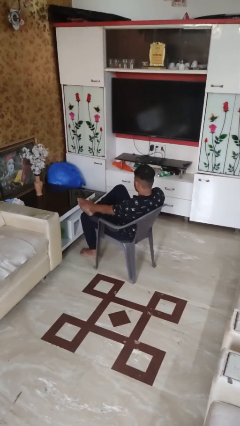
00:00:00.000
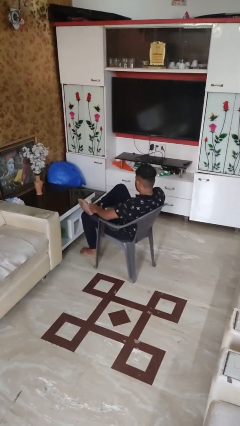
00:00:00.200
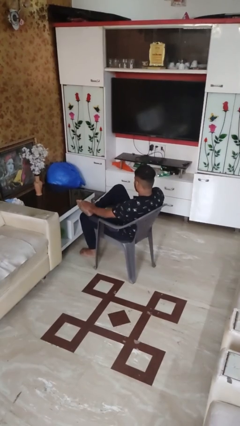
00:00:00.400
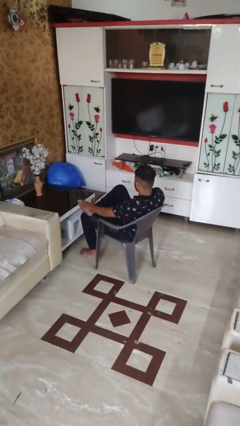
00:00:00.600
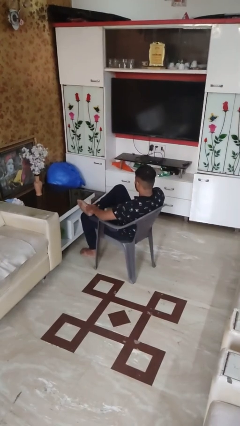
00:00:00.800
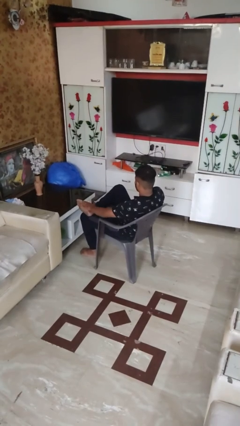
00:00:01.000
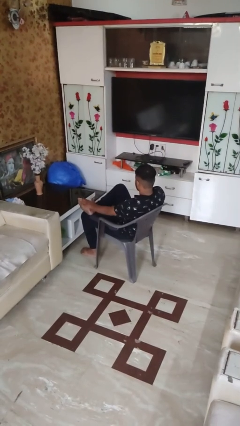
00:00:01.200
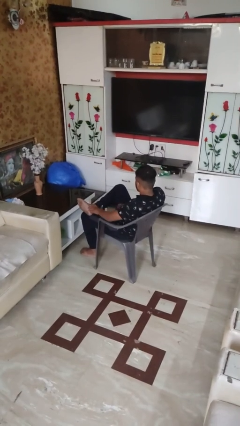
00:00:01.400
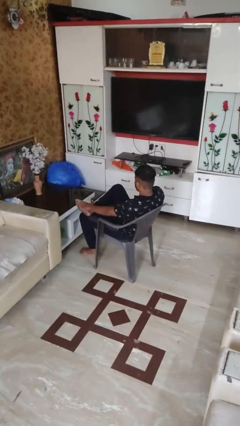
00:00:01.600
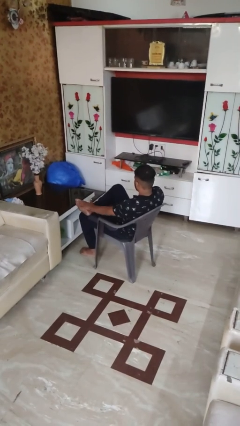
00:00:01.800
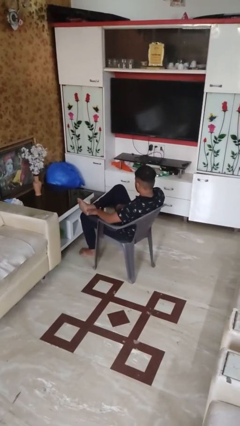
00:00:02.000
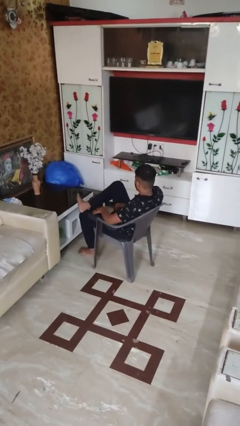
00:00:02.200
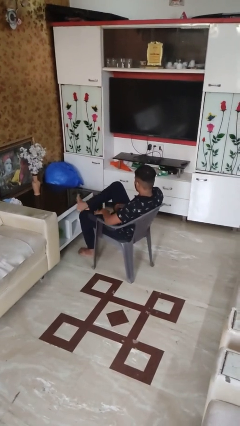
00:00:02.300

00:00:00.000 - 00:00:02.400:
person rubs foot

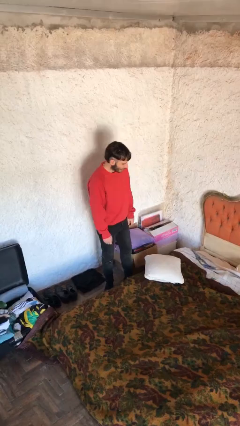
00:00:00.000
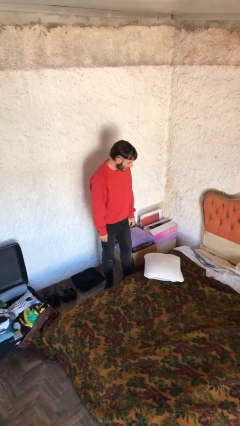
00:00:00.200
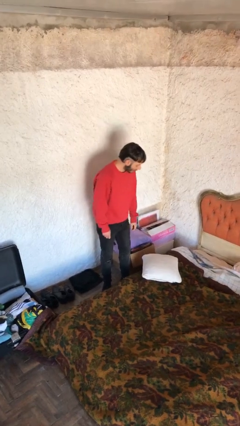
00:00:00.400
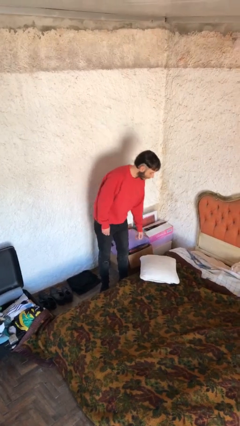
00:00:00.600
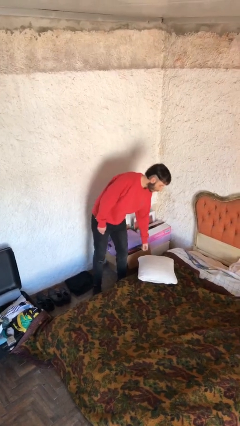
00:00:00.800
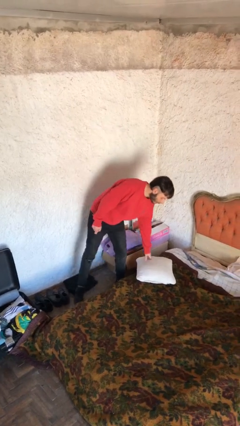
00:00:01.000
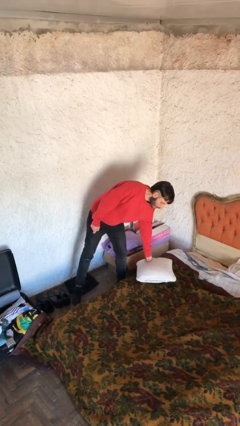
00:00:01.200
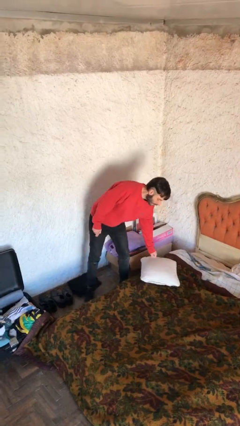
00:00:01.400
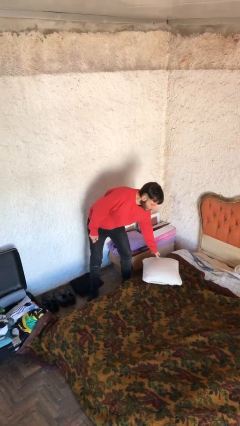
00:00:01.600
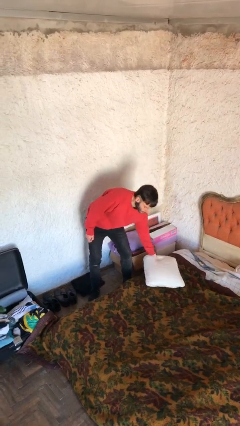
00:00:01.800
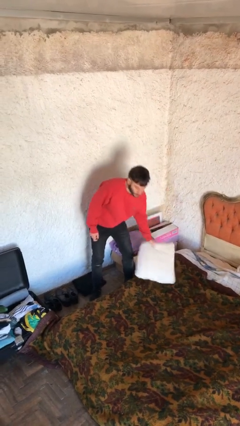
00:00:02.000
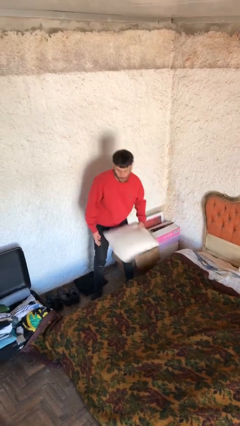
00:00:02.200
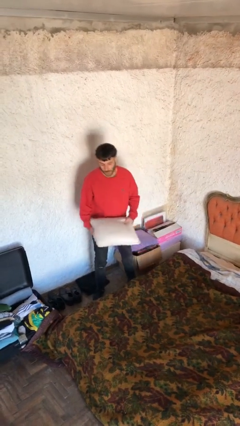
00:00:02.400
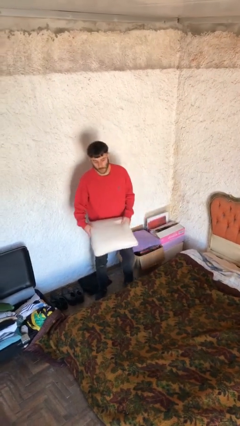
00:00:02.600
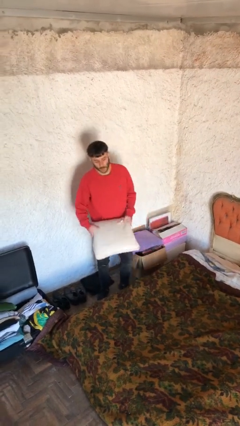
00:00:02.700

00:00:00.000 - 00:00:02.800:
person picks up object from bed

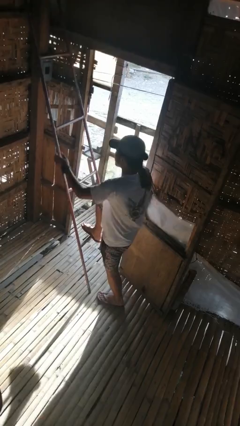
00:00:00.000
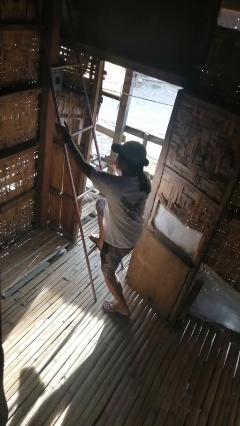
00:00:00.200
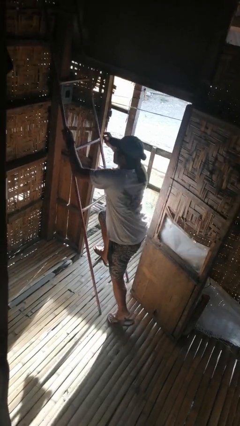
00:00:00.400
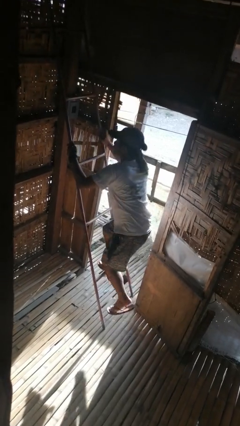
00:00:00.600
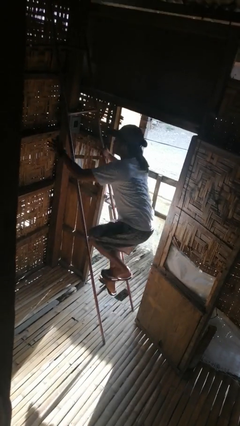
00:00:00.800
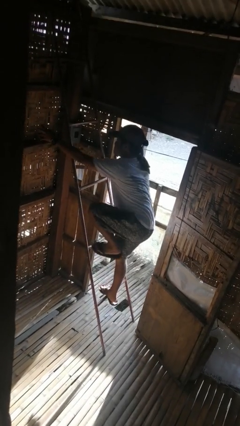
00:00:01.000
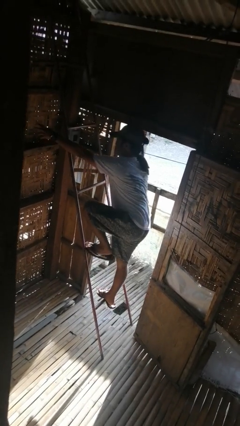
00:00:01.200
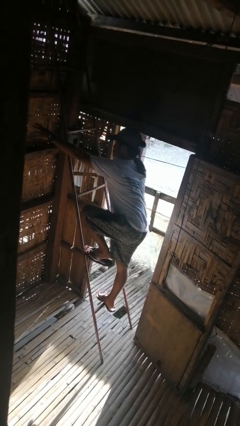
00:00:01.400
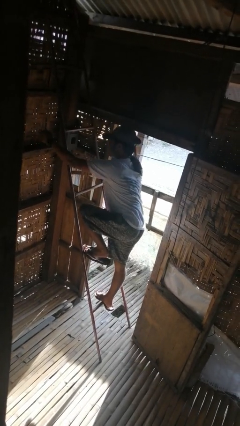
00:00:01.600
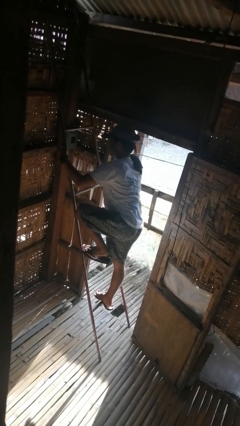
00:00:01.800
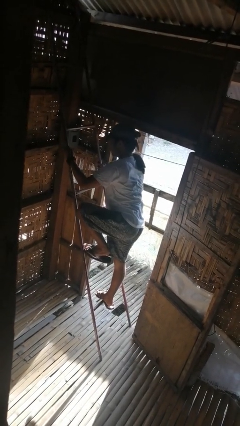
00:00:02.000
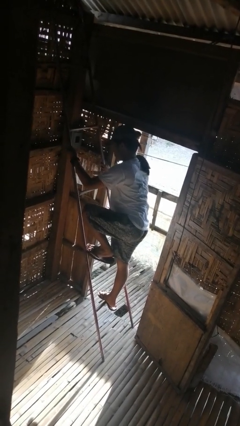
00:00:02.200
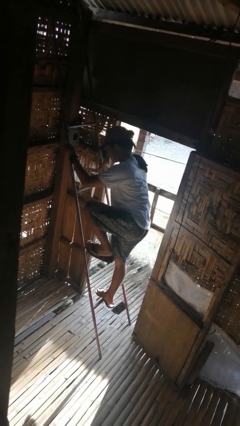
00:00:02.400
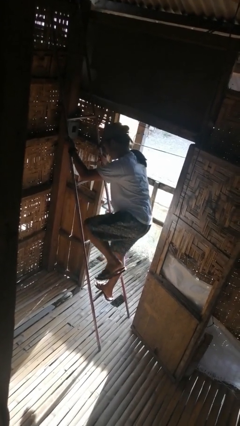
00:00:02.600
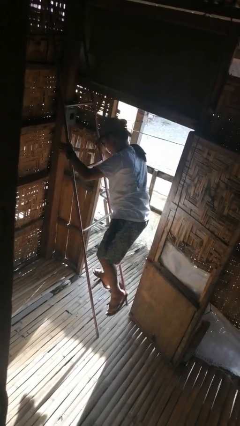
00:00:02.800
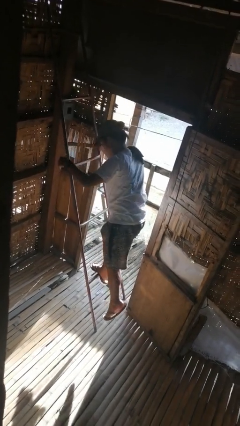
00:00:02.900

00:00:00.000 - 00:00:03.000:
person climbs up ladder

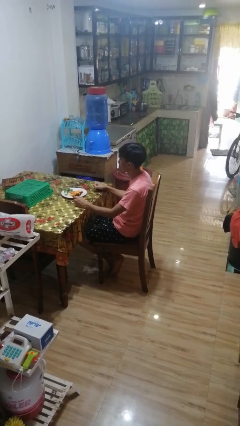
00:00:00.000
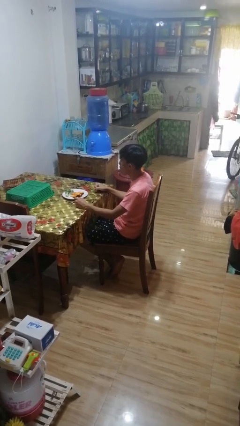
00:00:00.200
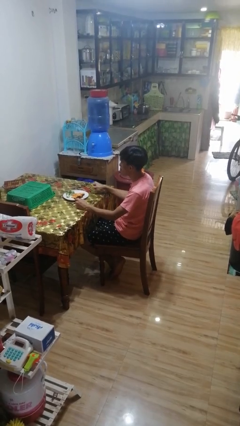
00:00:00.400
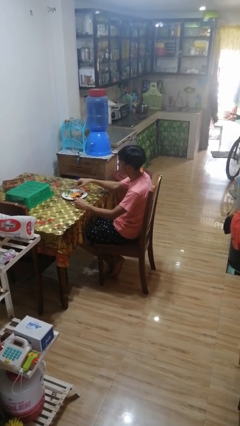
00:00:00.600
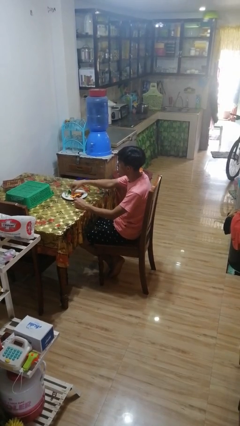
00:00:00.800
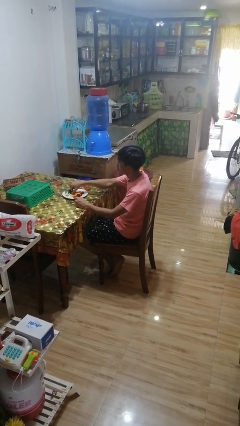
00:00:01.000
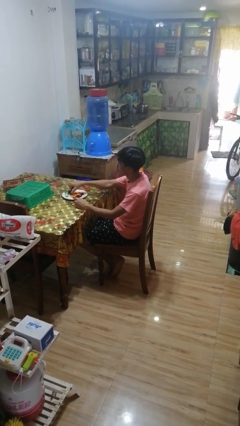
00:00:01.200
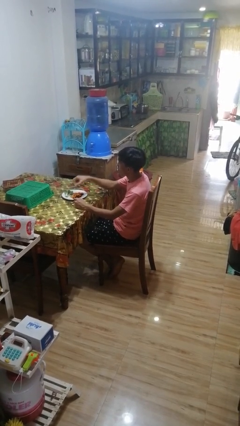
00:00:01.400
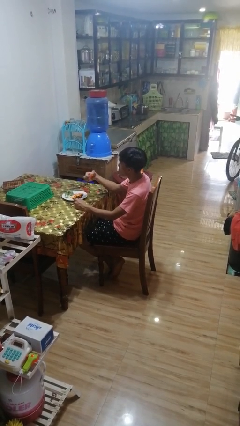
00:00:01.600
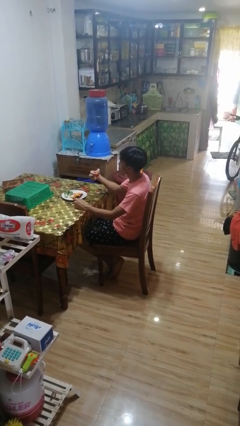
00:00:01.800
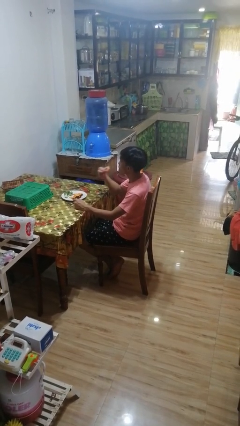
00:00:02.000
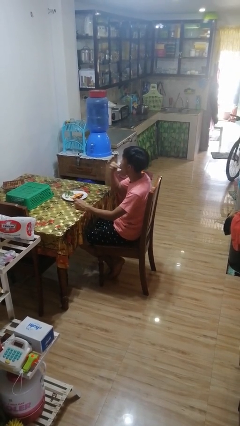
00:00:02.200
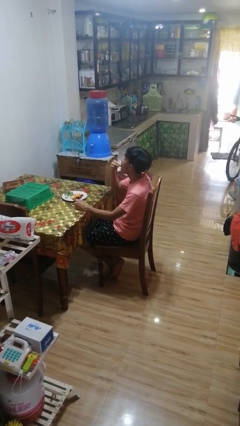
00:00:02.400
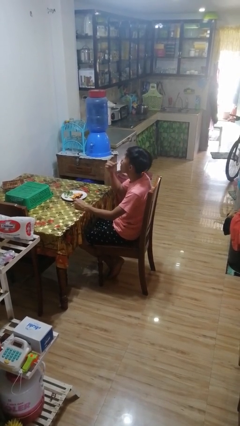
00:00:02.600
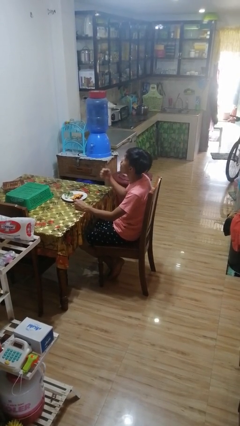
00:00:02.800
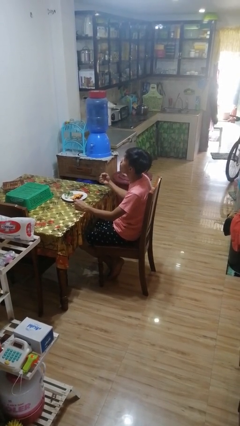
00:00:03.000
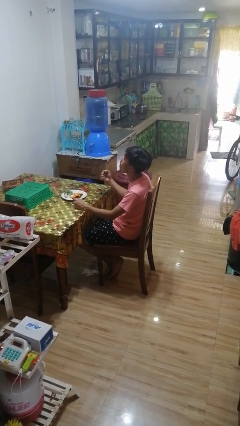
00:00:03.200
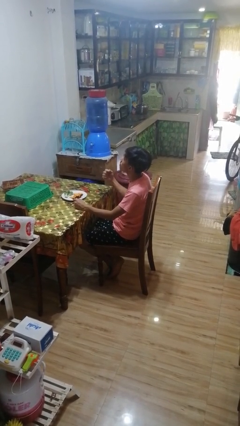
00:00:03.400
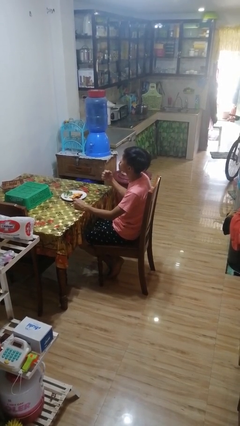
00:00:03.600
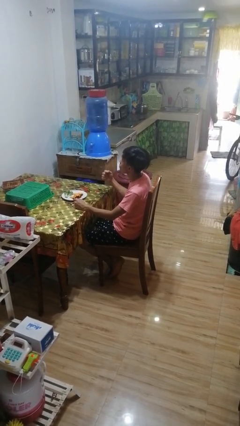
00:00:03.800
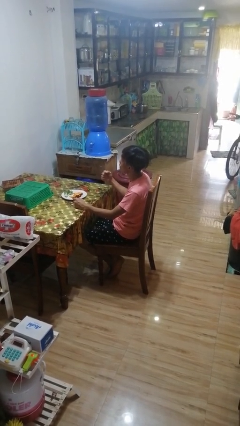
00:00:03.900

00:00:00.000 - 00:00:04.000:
person eats with hands

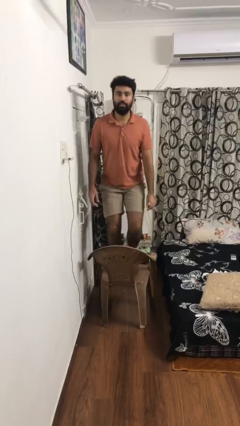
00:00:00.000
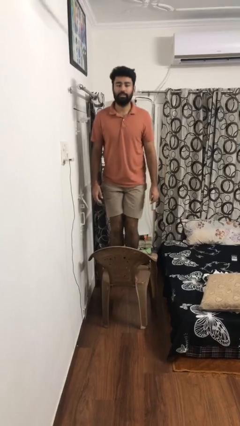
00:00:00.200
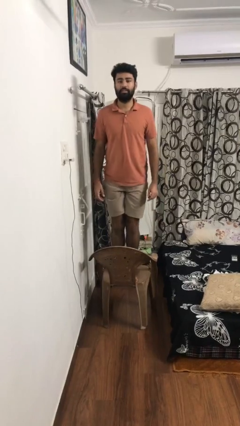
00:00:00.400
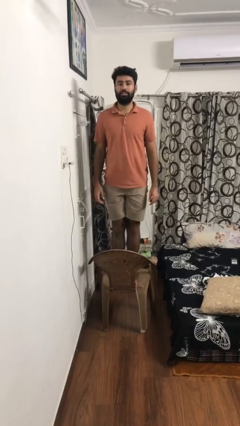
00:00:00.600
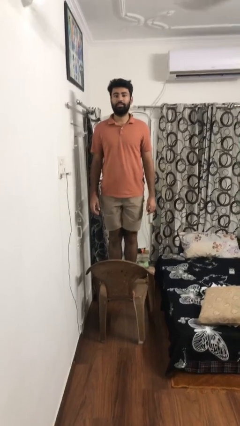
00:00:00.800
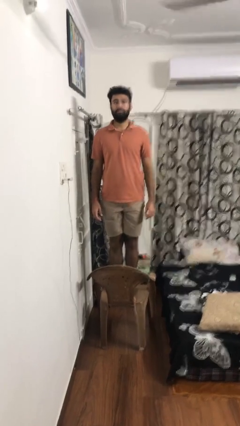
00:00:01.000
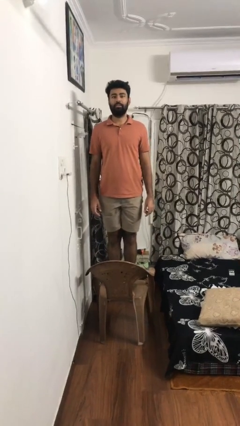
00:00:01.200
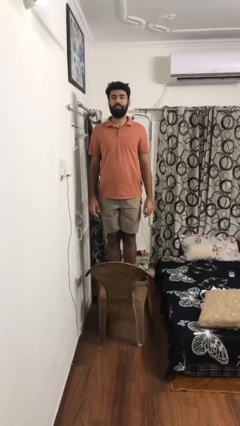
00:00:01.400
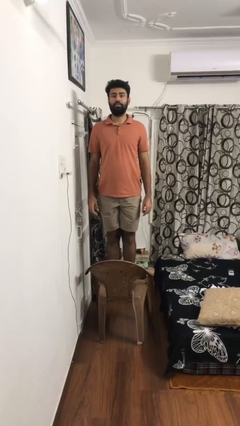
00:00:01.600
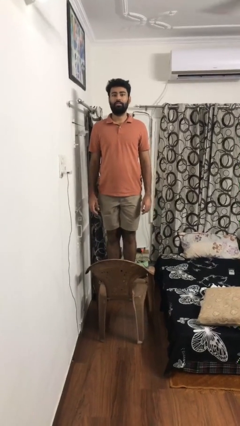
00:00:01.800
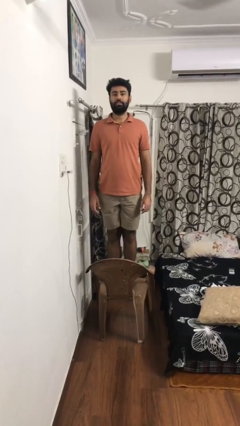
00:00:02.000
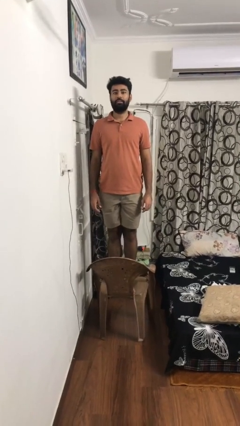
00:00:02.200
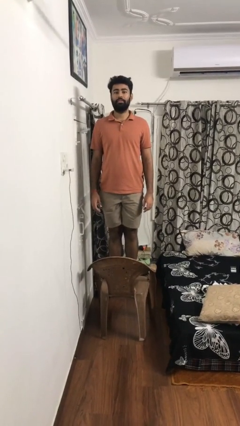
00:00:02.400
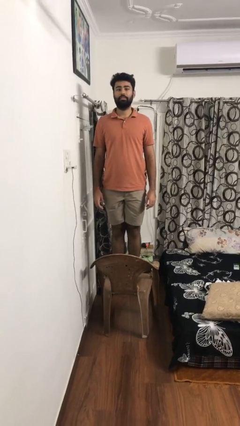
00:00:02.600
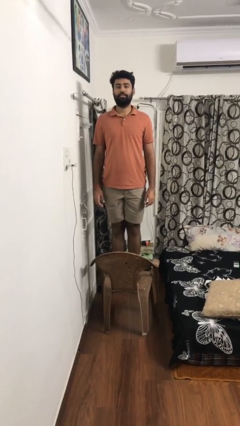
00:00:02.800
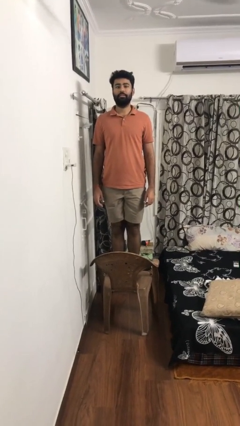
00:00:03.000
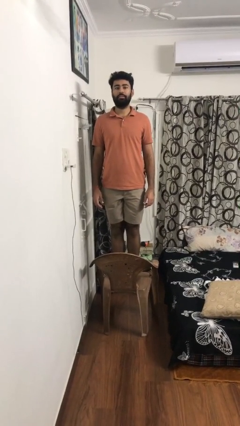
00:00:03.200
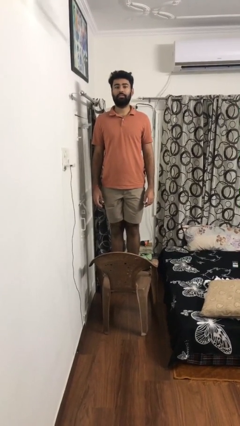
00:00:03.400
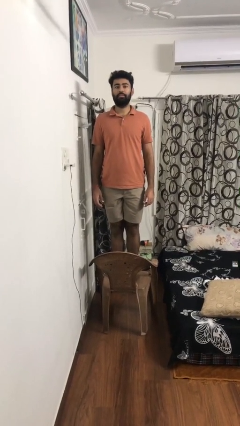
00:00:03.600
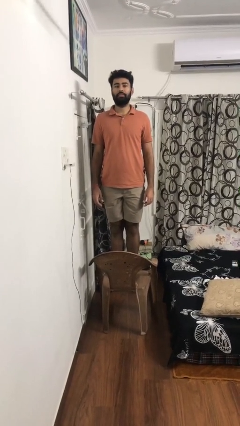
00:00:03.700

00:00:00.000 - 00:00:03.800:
person climbs on chair

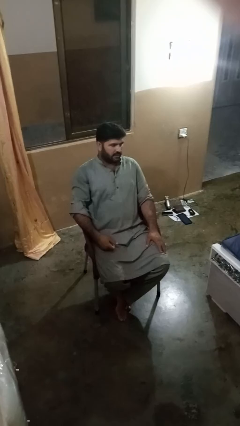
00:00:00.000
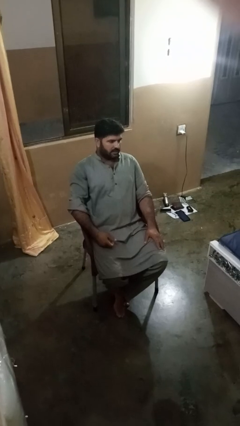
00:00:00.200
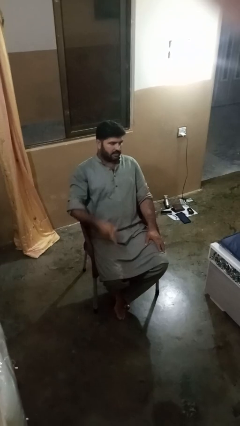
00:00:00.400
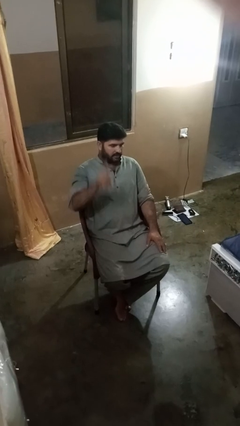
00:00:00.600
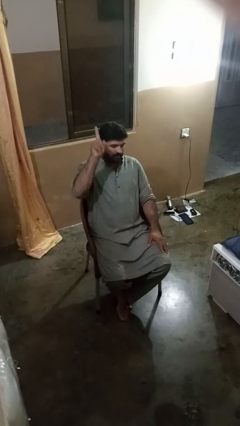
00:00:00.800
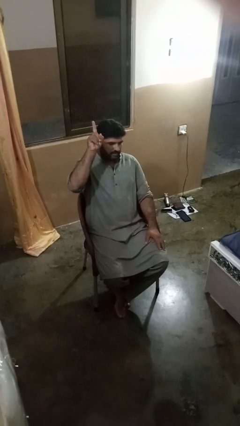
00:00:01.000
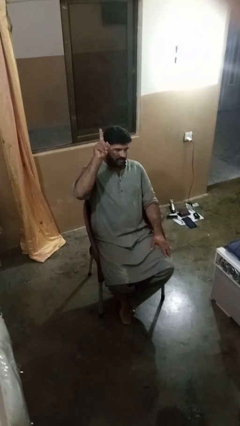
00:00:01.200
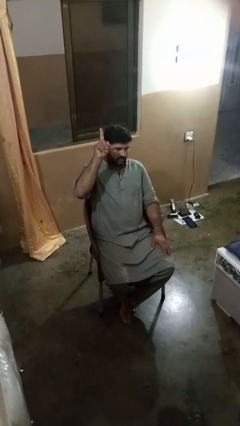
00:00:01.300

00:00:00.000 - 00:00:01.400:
person gestures number one
